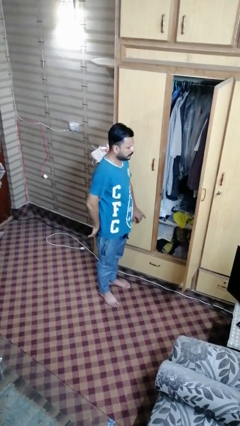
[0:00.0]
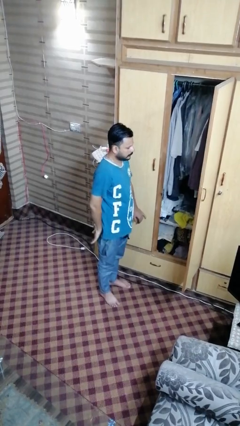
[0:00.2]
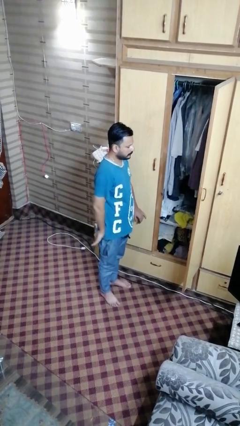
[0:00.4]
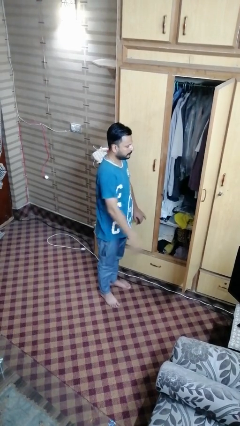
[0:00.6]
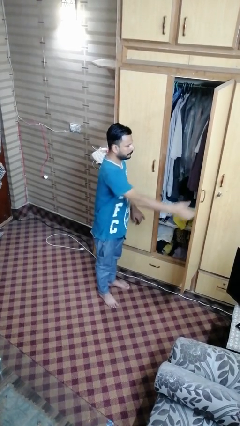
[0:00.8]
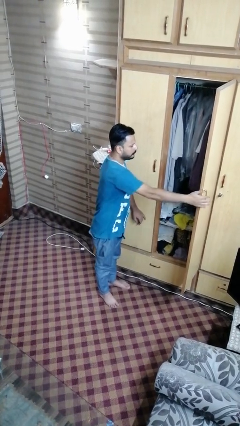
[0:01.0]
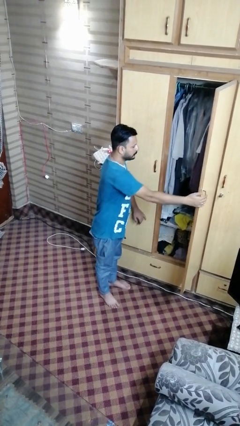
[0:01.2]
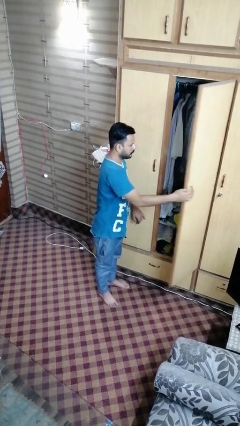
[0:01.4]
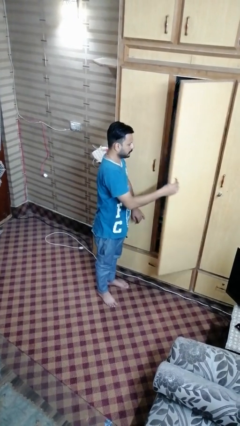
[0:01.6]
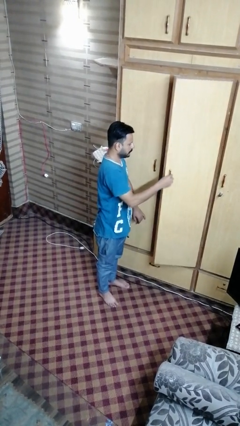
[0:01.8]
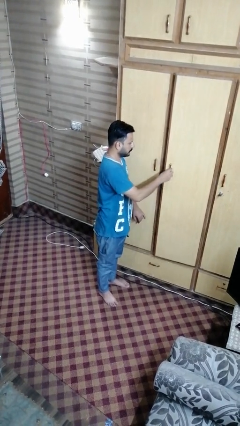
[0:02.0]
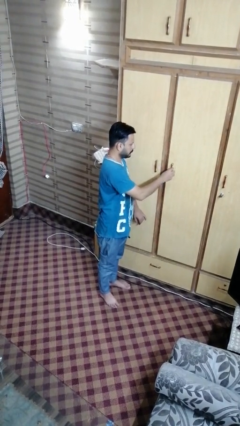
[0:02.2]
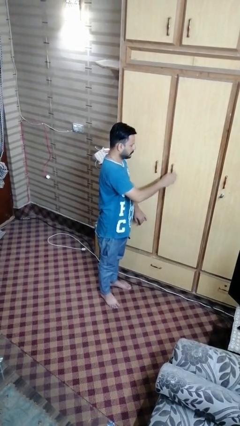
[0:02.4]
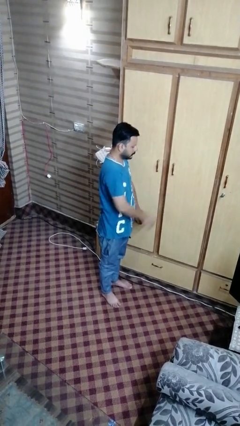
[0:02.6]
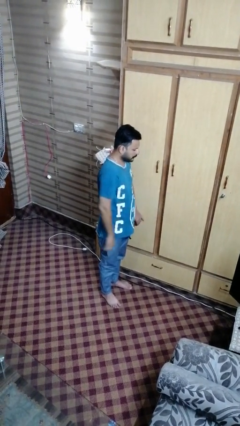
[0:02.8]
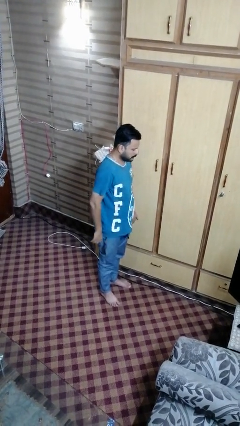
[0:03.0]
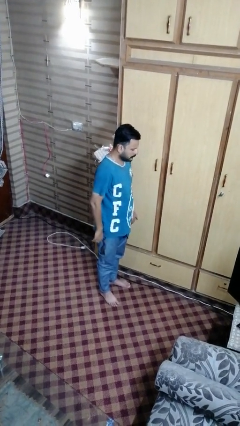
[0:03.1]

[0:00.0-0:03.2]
person closes closet door

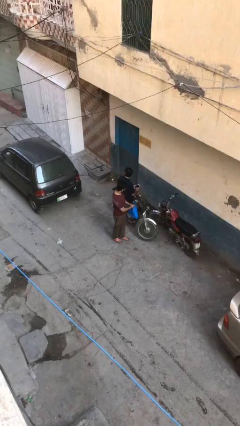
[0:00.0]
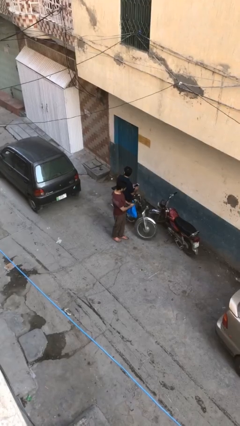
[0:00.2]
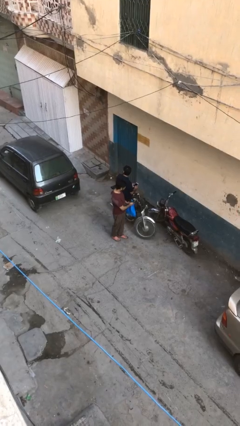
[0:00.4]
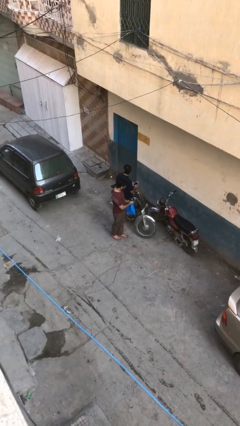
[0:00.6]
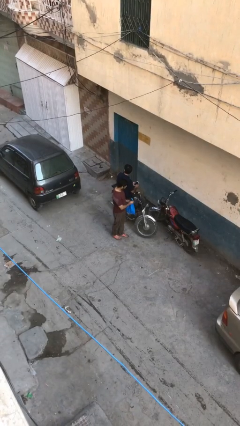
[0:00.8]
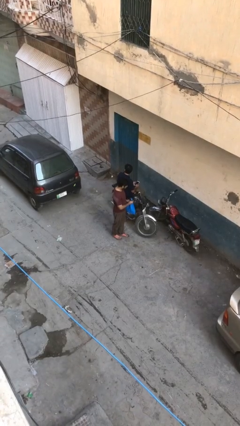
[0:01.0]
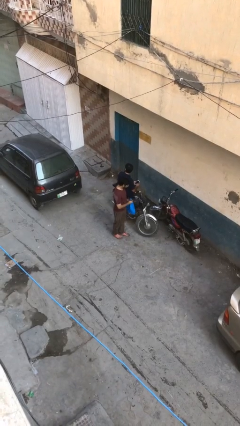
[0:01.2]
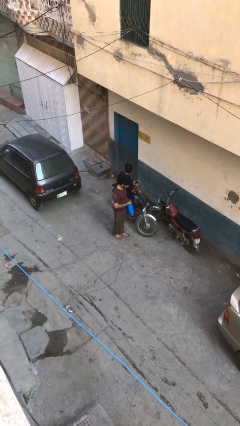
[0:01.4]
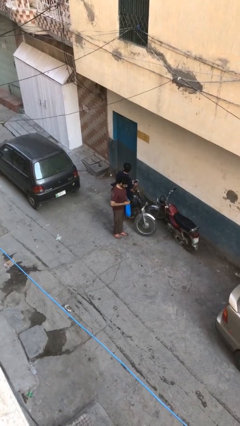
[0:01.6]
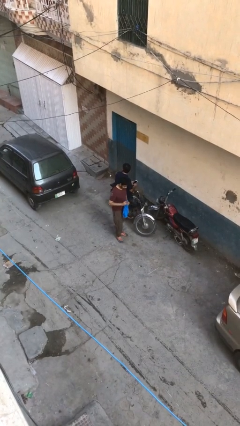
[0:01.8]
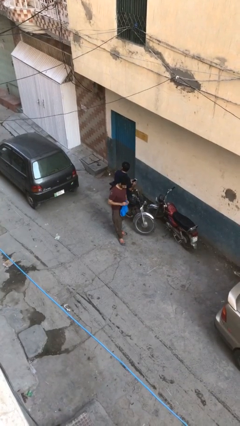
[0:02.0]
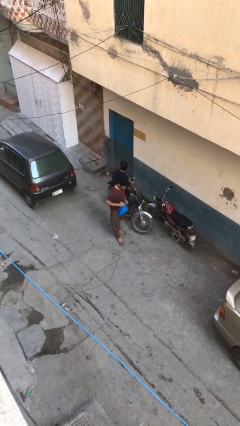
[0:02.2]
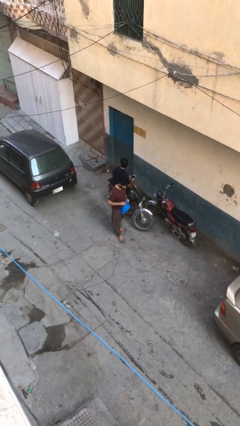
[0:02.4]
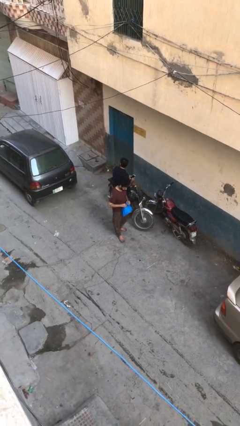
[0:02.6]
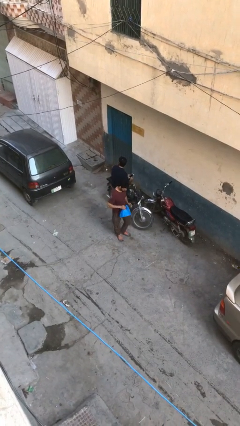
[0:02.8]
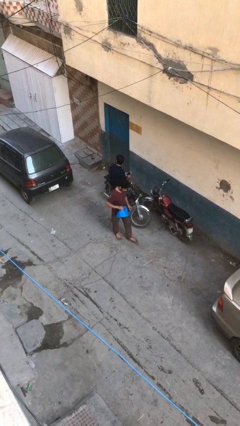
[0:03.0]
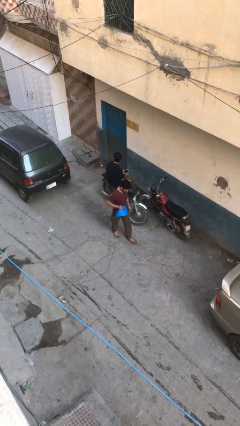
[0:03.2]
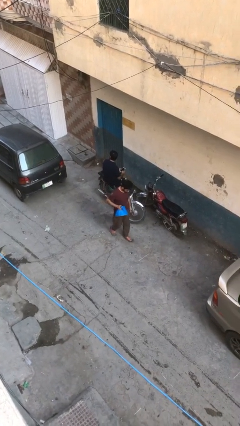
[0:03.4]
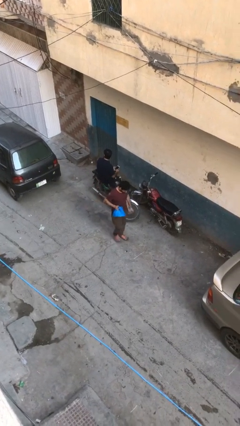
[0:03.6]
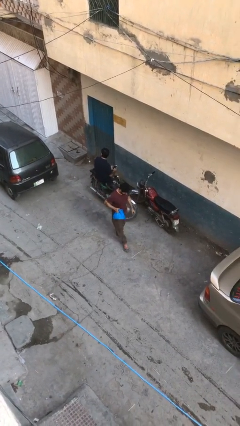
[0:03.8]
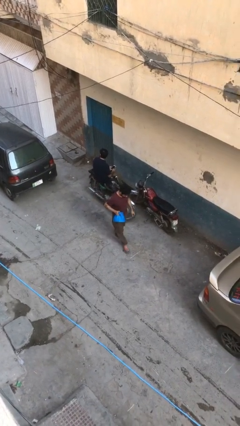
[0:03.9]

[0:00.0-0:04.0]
person steals object from person

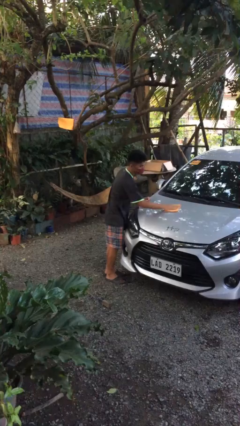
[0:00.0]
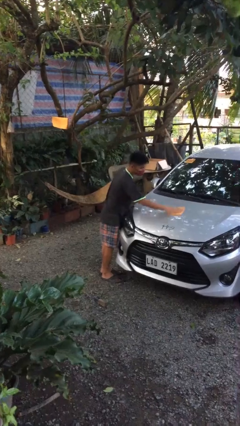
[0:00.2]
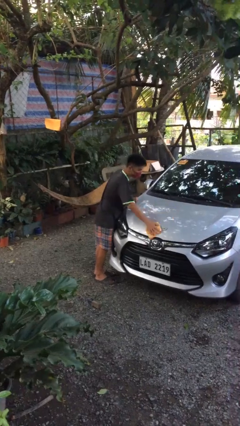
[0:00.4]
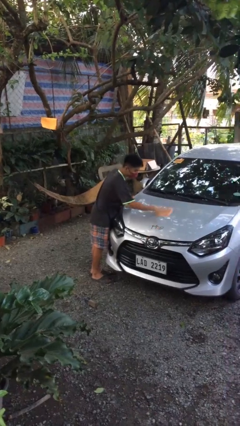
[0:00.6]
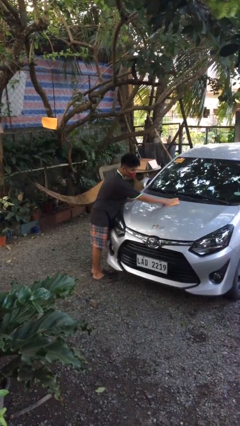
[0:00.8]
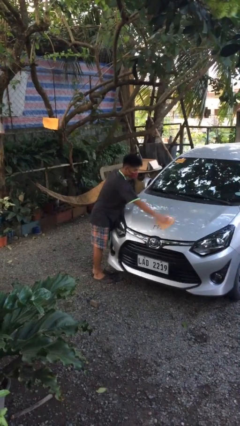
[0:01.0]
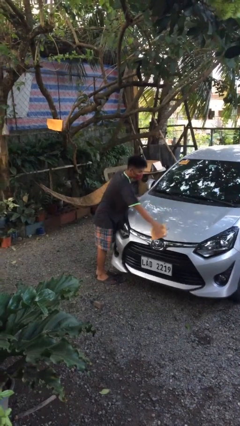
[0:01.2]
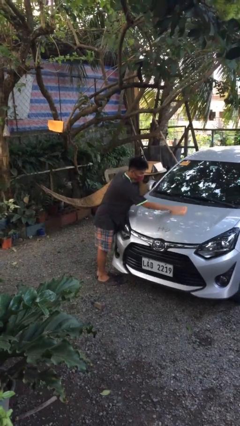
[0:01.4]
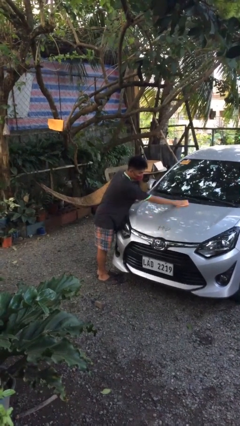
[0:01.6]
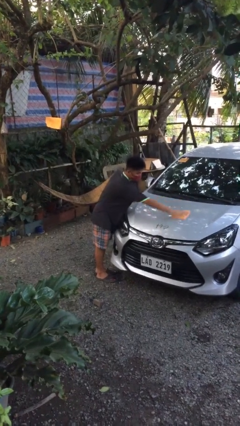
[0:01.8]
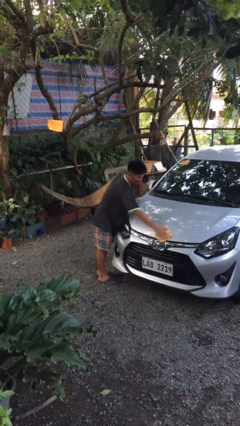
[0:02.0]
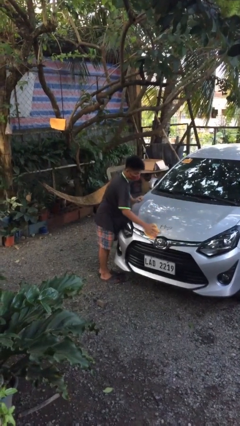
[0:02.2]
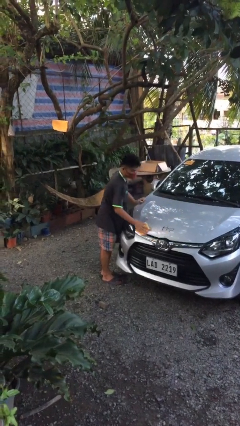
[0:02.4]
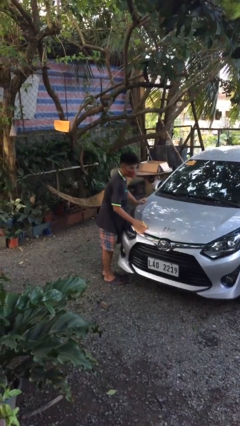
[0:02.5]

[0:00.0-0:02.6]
person polishes car with rag

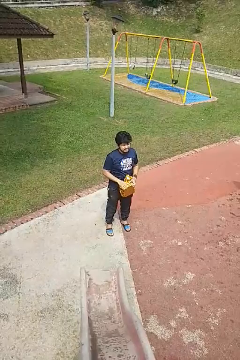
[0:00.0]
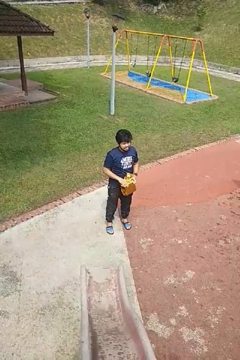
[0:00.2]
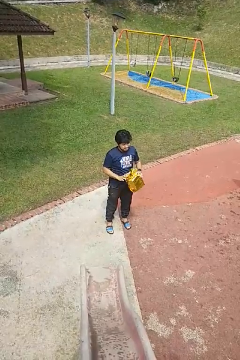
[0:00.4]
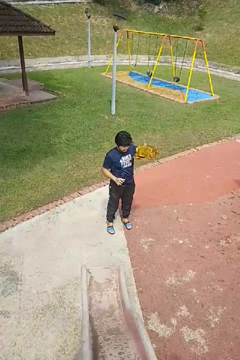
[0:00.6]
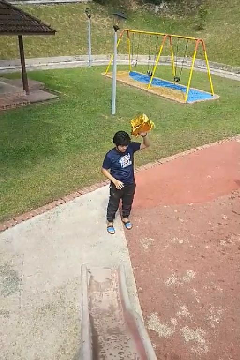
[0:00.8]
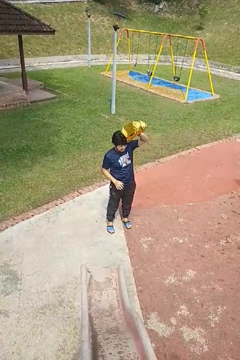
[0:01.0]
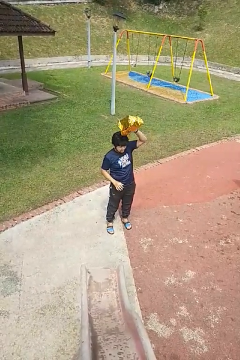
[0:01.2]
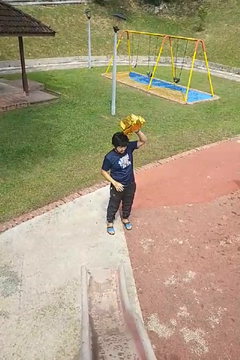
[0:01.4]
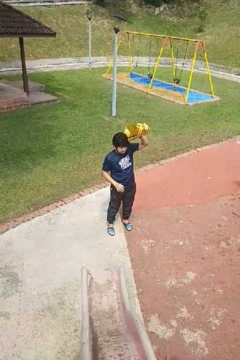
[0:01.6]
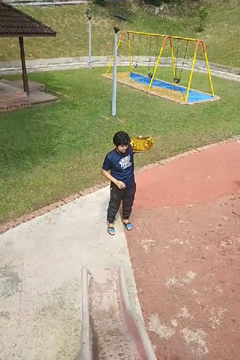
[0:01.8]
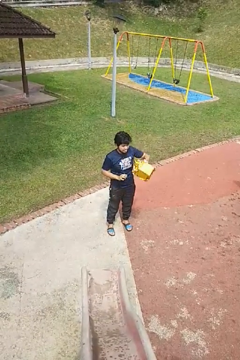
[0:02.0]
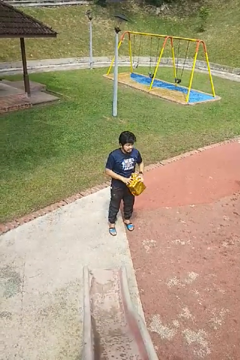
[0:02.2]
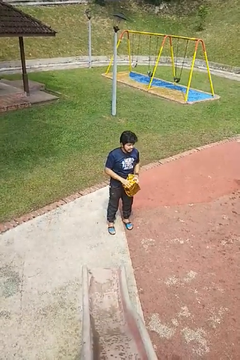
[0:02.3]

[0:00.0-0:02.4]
person holds object above head

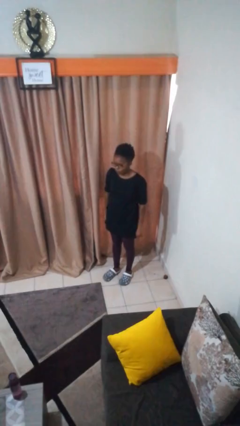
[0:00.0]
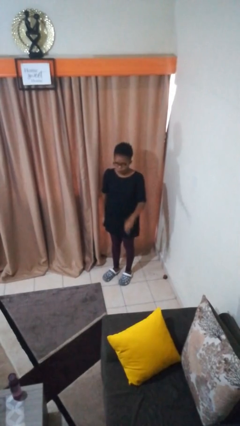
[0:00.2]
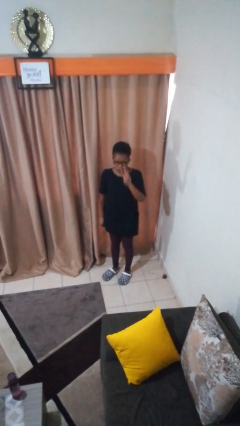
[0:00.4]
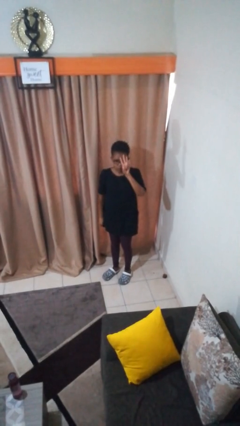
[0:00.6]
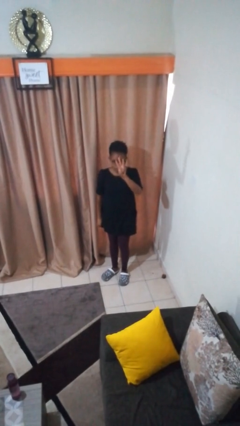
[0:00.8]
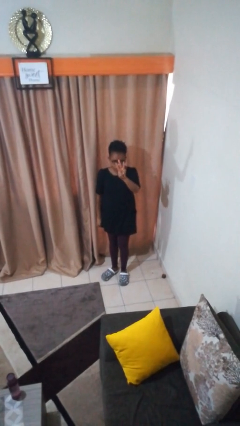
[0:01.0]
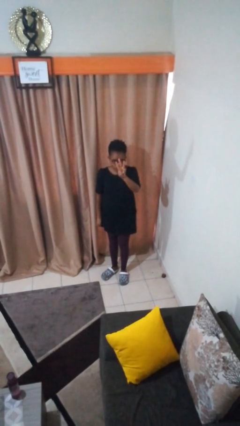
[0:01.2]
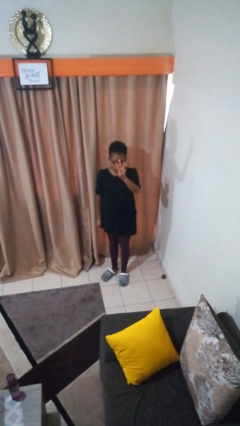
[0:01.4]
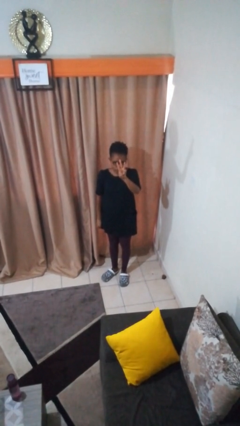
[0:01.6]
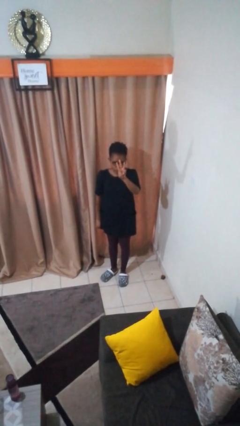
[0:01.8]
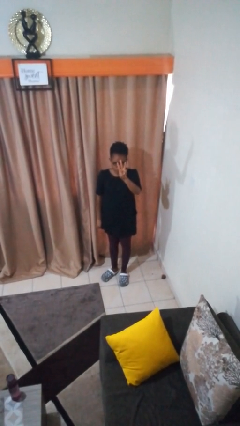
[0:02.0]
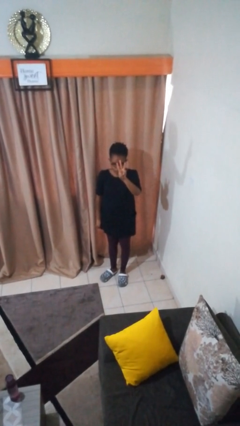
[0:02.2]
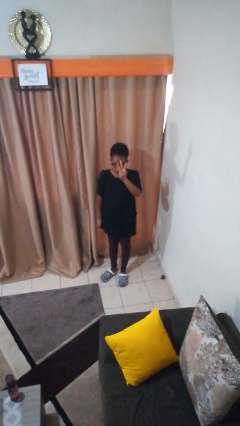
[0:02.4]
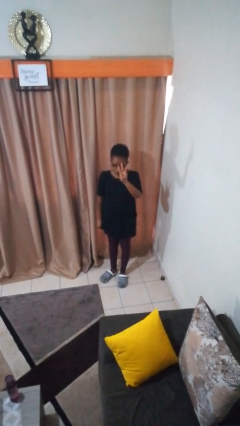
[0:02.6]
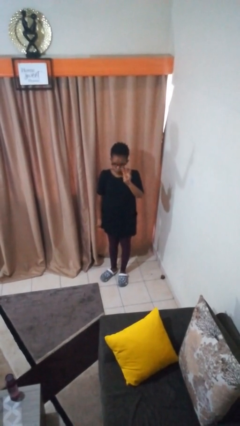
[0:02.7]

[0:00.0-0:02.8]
person gestures number three

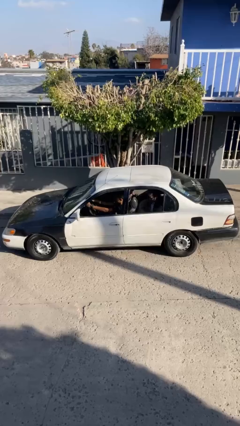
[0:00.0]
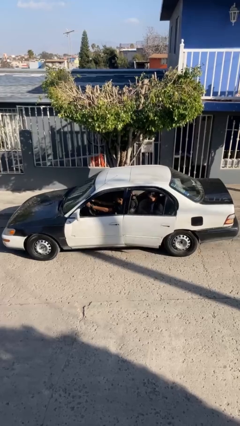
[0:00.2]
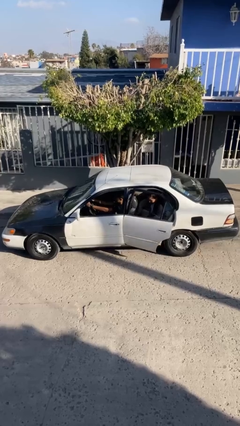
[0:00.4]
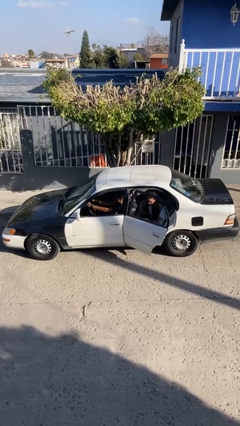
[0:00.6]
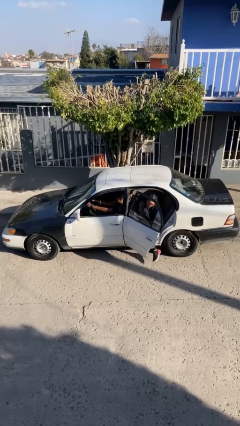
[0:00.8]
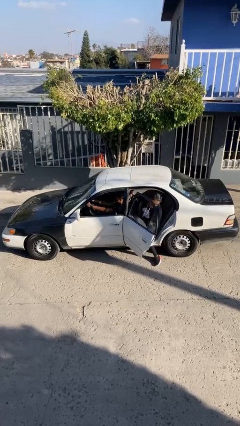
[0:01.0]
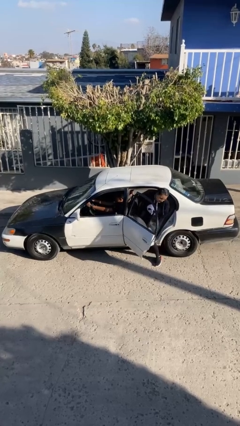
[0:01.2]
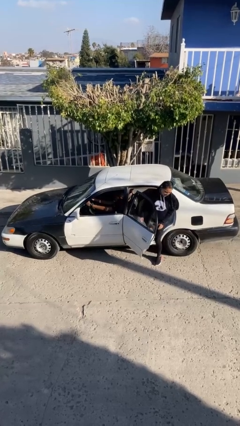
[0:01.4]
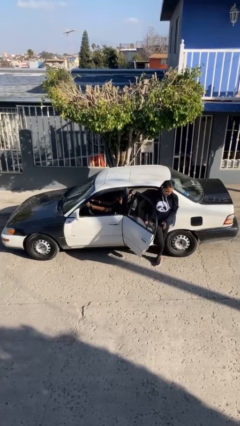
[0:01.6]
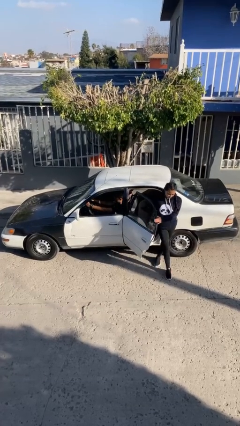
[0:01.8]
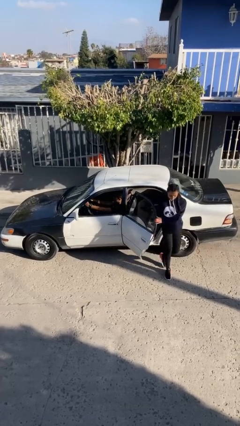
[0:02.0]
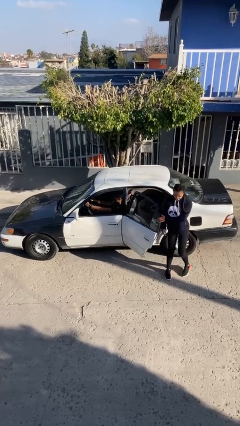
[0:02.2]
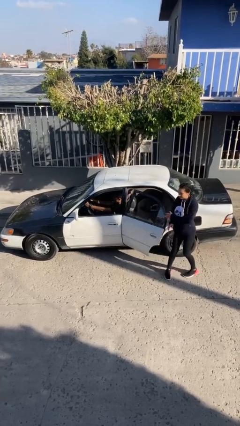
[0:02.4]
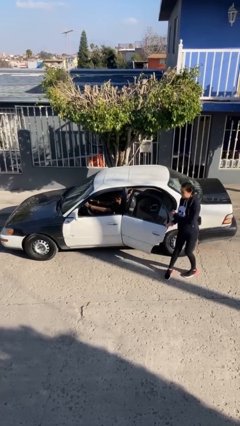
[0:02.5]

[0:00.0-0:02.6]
car drops off person

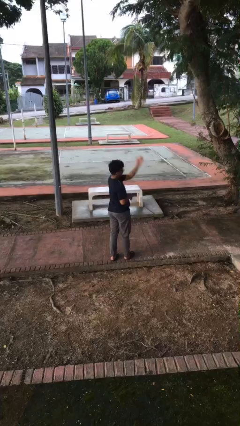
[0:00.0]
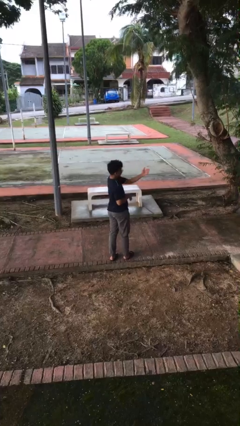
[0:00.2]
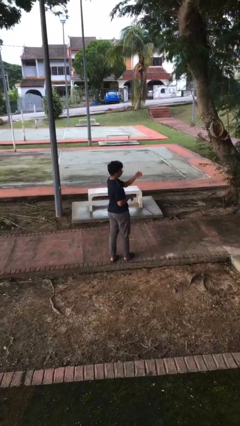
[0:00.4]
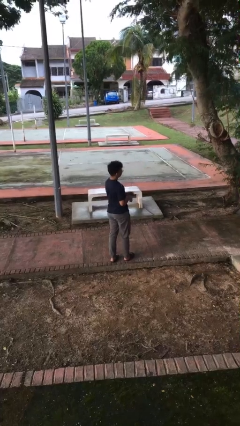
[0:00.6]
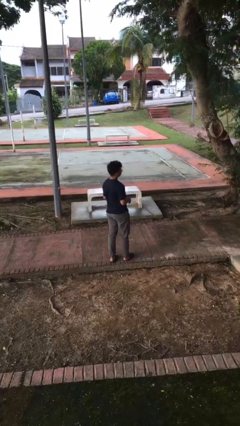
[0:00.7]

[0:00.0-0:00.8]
person karate chop
